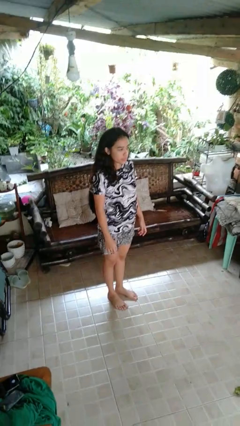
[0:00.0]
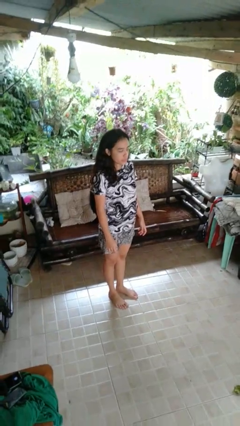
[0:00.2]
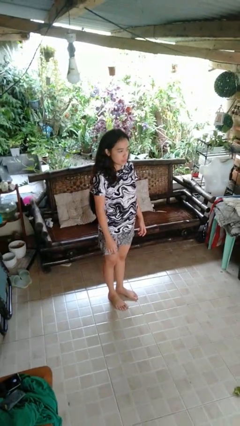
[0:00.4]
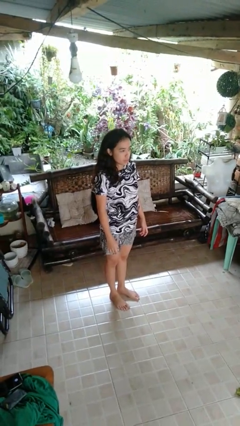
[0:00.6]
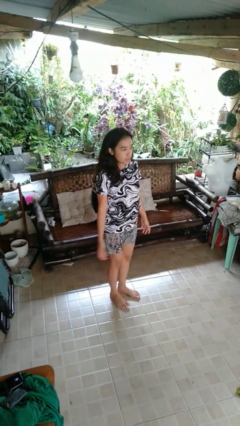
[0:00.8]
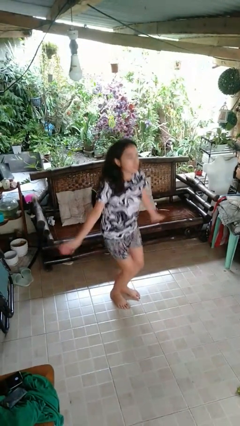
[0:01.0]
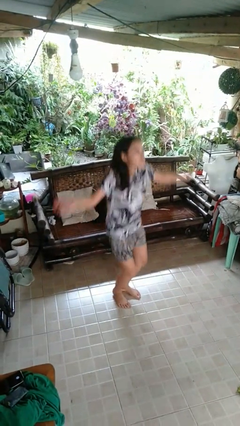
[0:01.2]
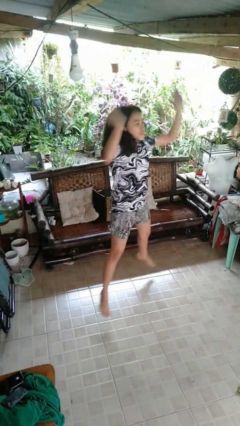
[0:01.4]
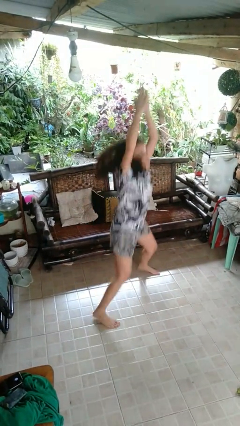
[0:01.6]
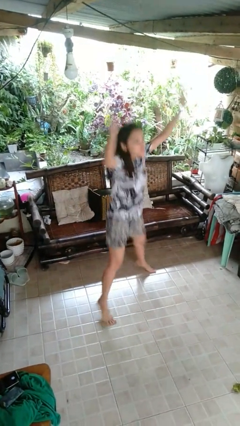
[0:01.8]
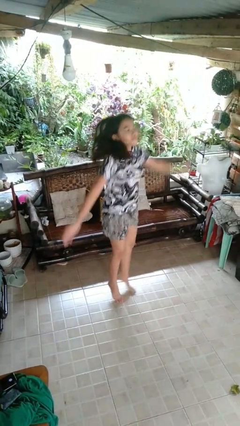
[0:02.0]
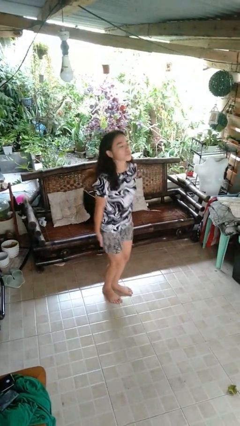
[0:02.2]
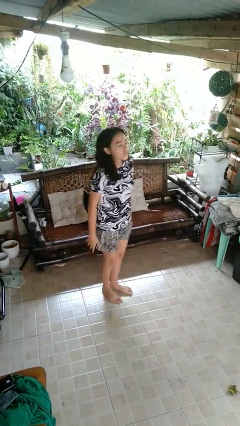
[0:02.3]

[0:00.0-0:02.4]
person exercises with jumping jacks

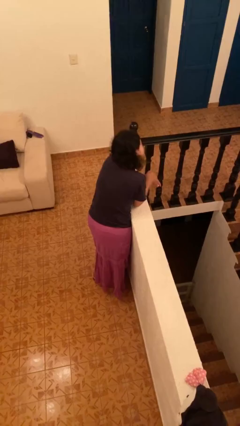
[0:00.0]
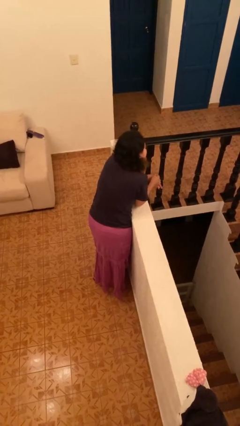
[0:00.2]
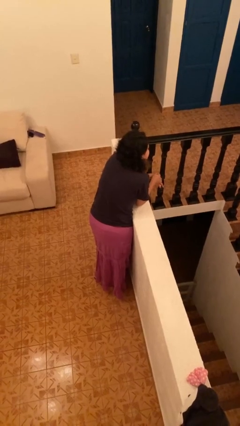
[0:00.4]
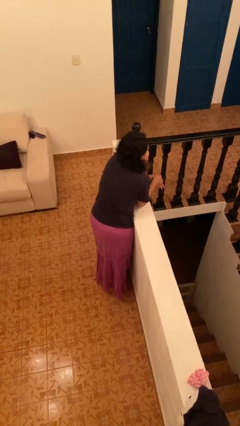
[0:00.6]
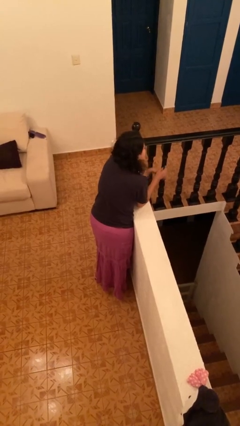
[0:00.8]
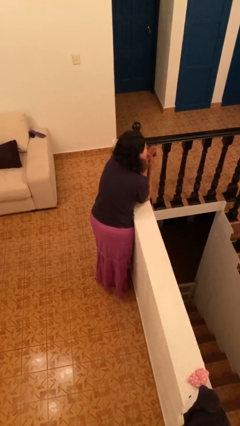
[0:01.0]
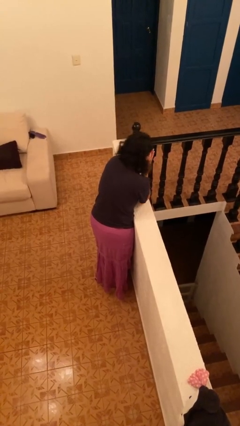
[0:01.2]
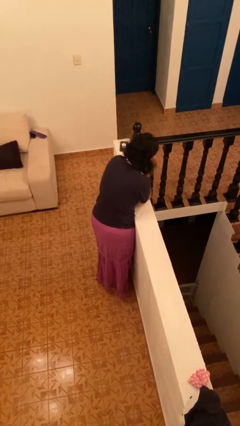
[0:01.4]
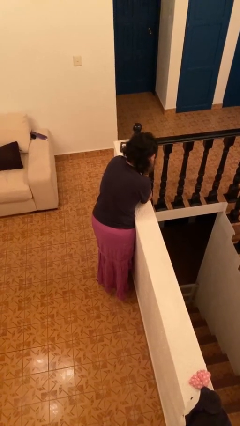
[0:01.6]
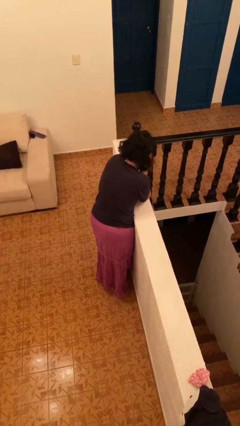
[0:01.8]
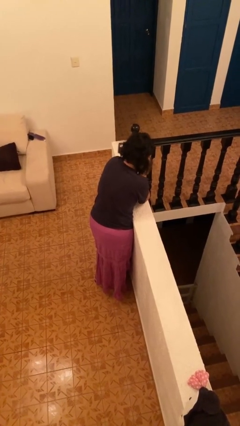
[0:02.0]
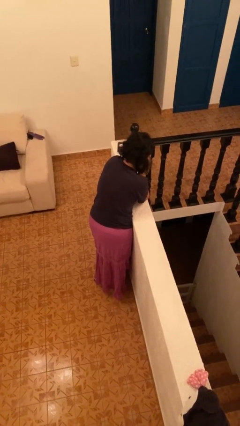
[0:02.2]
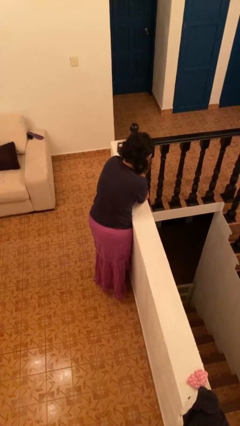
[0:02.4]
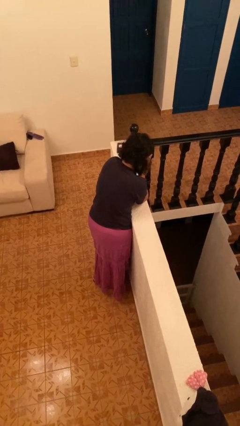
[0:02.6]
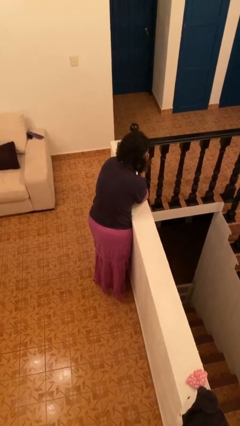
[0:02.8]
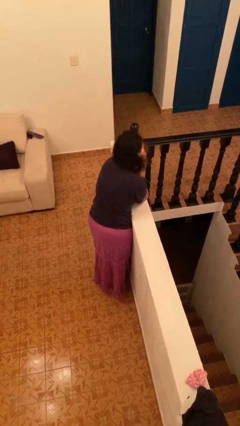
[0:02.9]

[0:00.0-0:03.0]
person covers face with hands

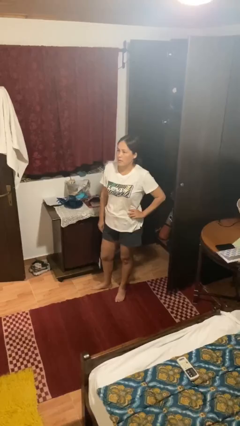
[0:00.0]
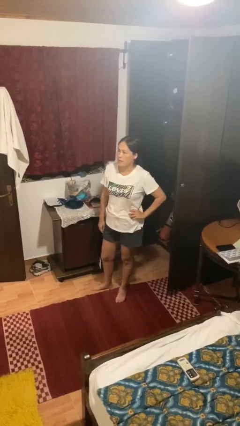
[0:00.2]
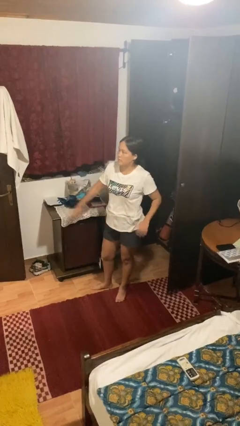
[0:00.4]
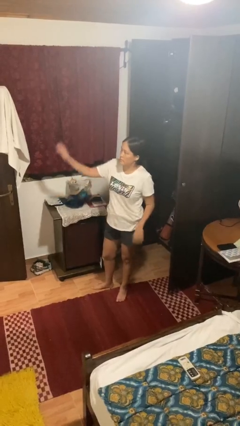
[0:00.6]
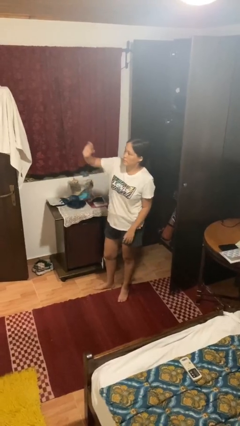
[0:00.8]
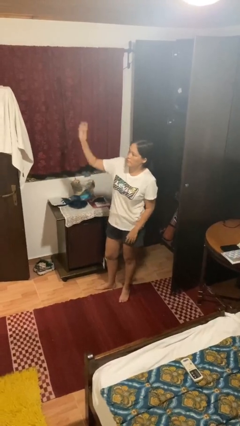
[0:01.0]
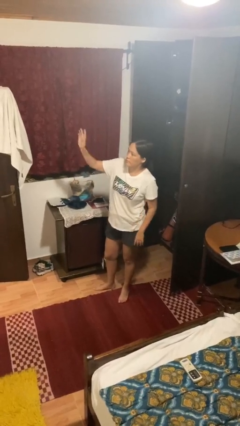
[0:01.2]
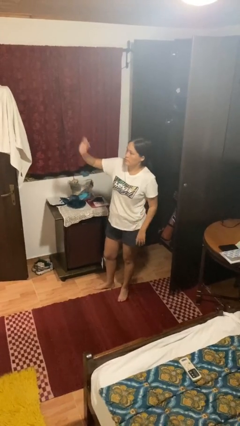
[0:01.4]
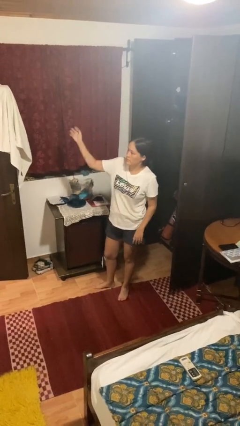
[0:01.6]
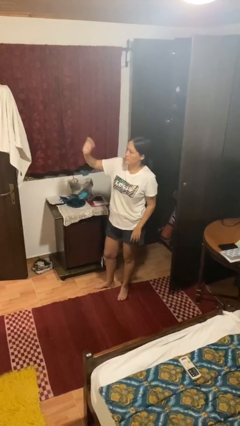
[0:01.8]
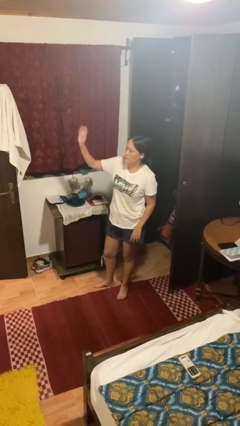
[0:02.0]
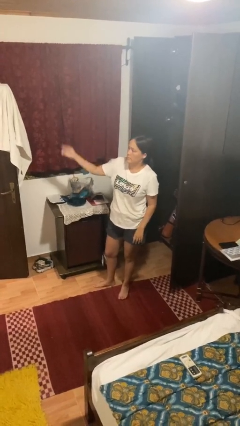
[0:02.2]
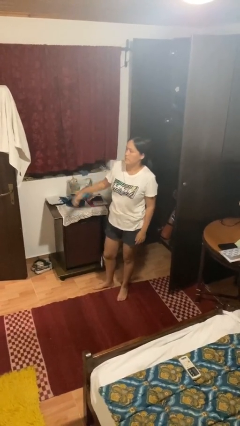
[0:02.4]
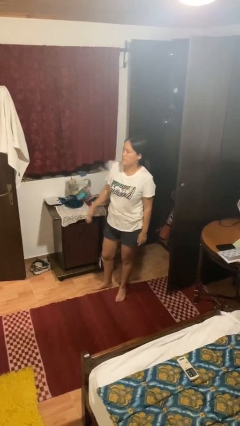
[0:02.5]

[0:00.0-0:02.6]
person waves at person

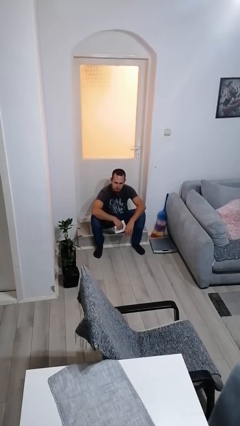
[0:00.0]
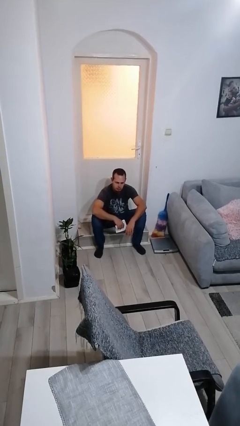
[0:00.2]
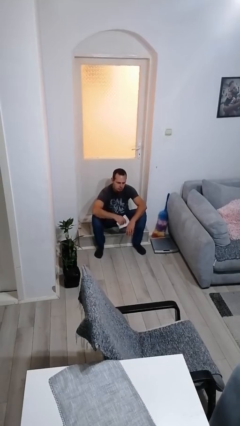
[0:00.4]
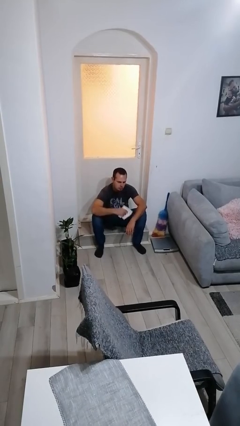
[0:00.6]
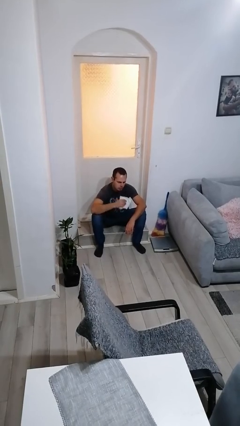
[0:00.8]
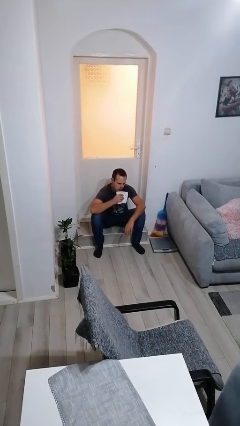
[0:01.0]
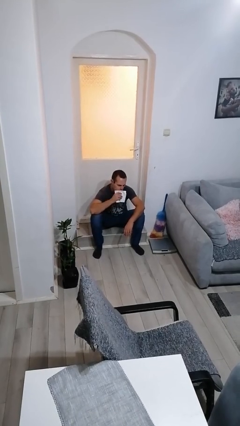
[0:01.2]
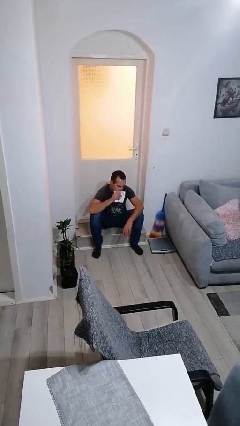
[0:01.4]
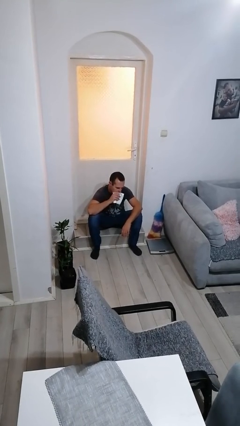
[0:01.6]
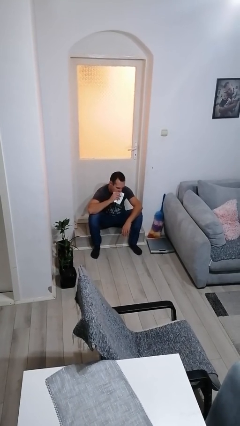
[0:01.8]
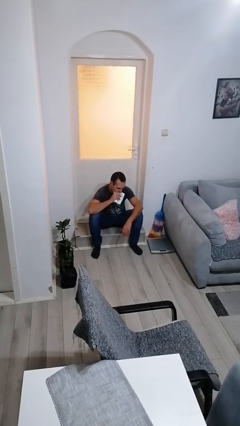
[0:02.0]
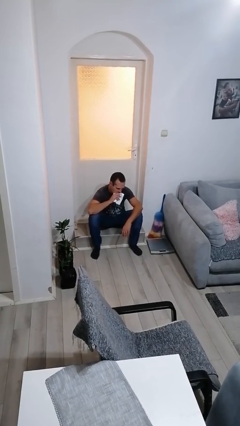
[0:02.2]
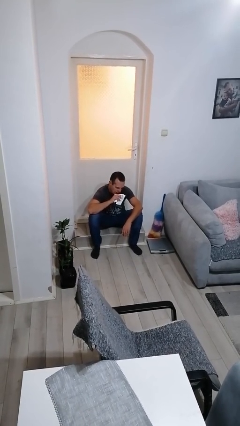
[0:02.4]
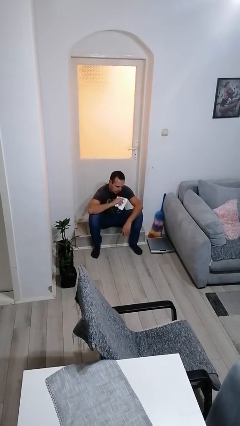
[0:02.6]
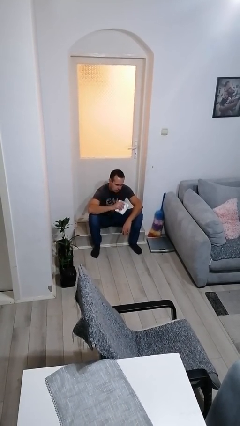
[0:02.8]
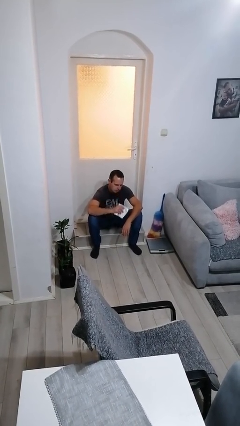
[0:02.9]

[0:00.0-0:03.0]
person wipes mouth with napkin

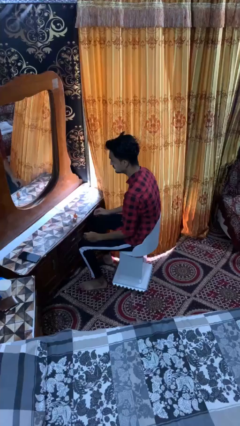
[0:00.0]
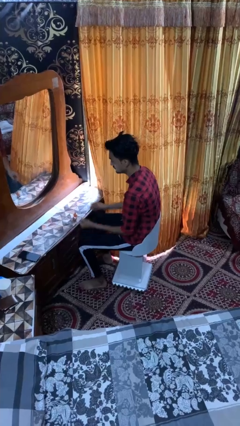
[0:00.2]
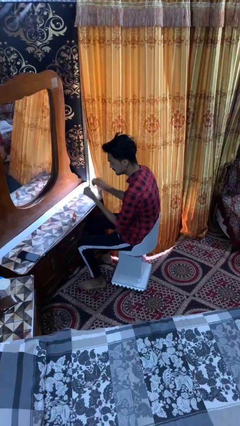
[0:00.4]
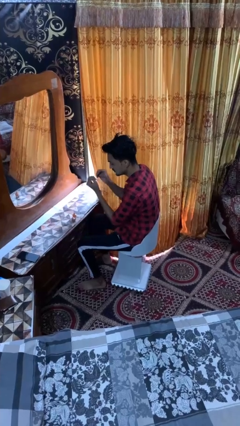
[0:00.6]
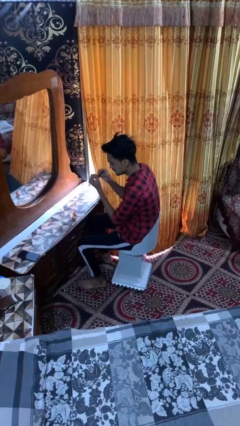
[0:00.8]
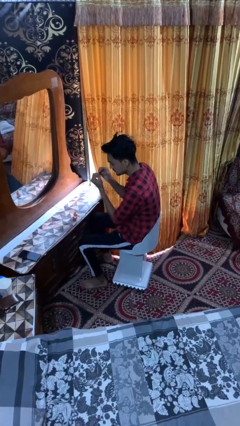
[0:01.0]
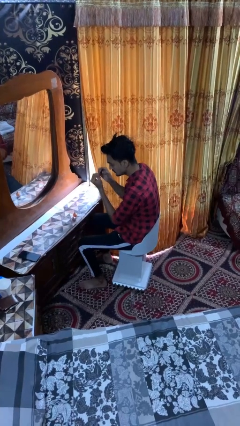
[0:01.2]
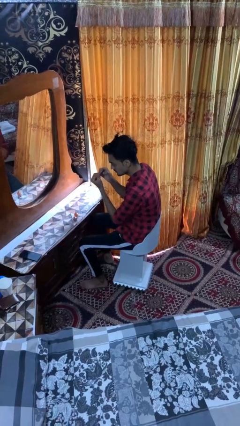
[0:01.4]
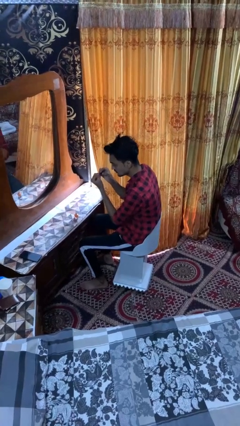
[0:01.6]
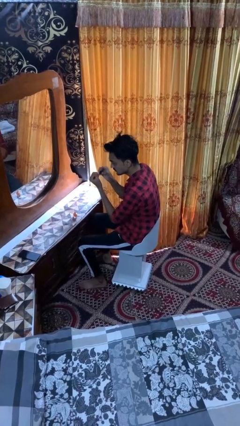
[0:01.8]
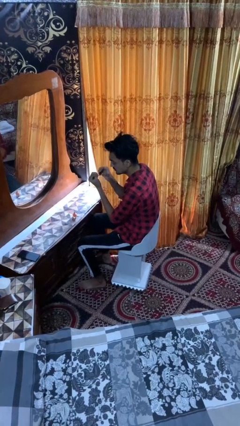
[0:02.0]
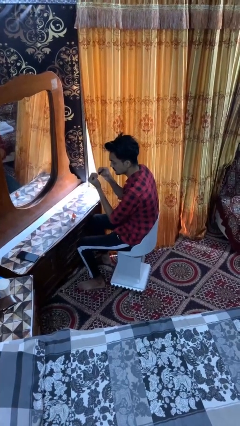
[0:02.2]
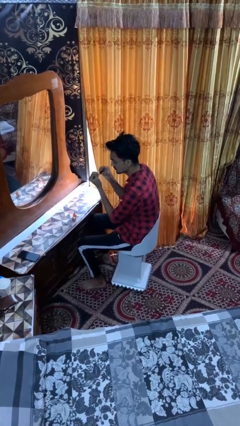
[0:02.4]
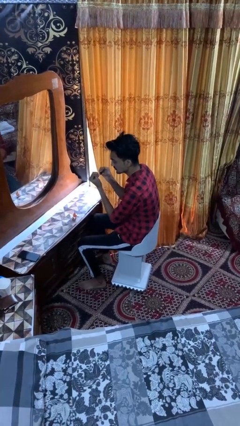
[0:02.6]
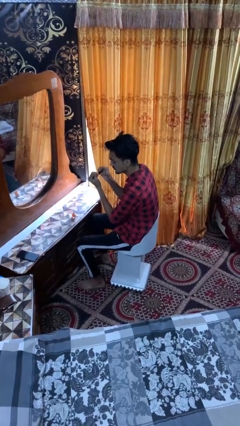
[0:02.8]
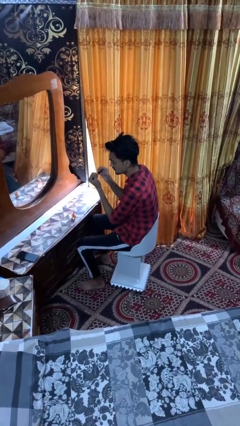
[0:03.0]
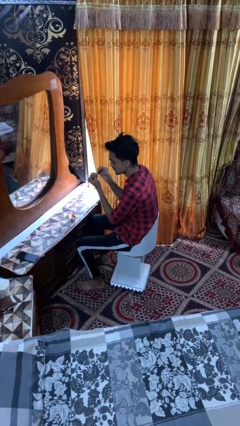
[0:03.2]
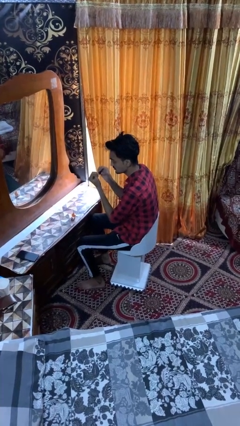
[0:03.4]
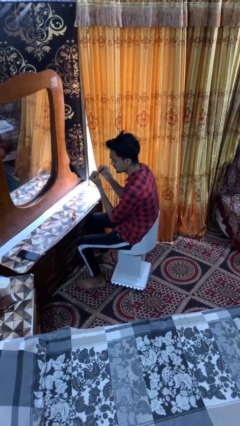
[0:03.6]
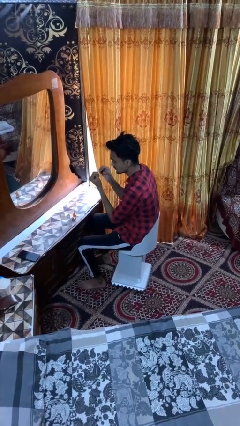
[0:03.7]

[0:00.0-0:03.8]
person paints fingernails

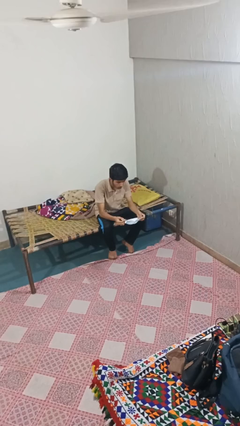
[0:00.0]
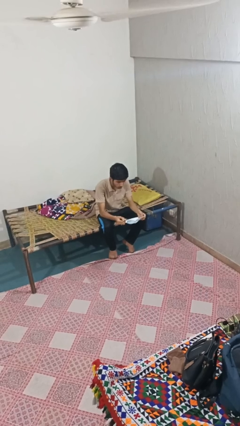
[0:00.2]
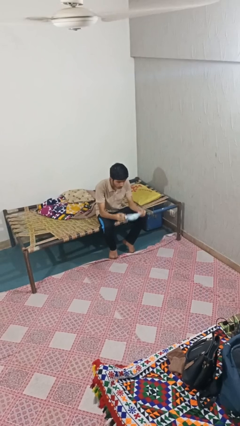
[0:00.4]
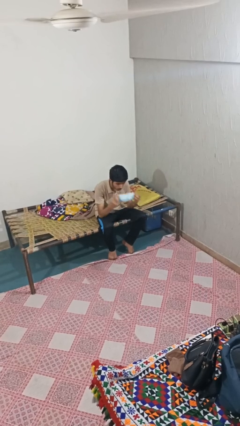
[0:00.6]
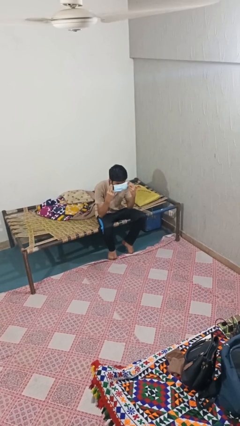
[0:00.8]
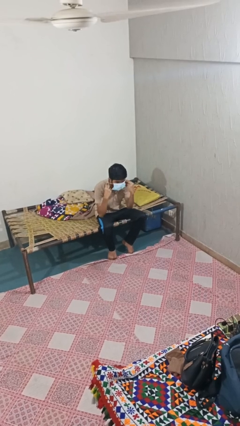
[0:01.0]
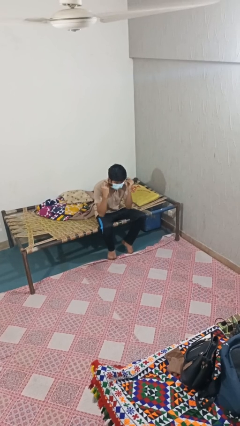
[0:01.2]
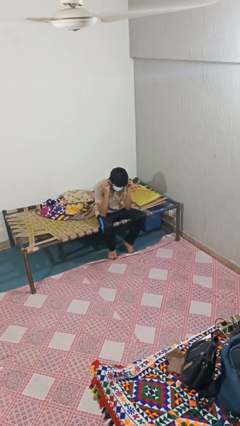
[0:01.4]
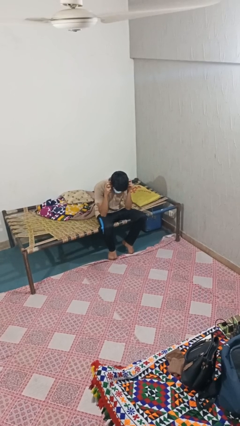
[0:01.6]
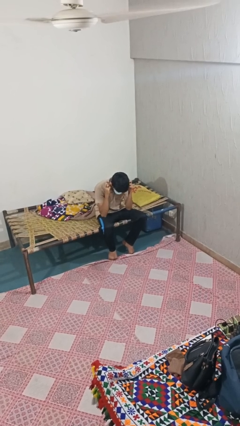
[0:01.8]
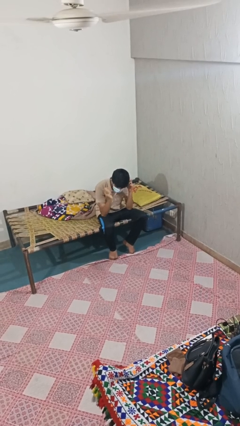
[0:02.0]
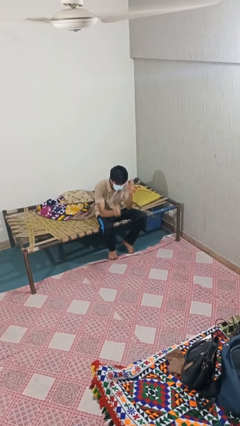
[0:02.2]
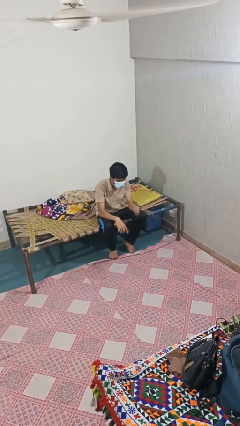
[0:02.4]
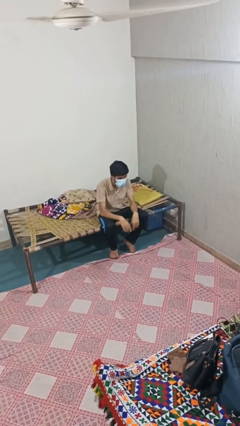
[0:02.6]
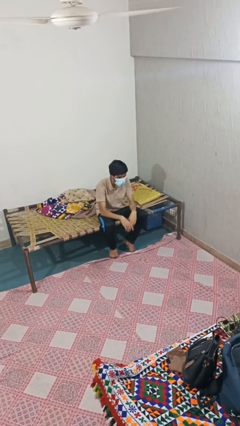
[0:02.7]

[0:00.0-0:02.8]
person puts on facemask
